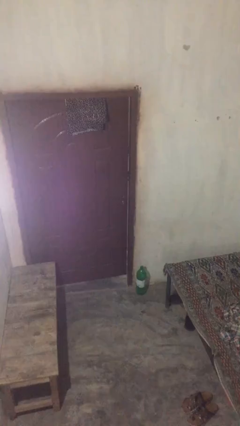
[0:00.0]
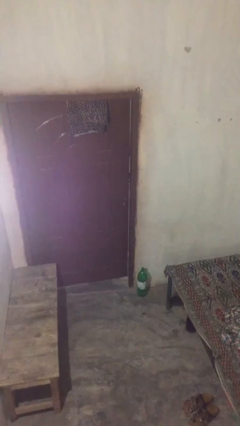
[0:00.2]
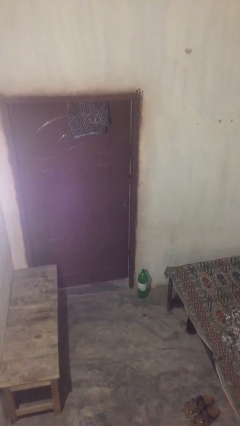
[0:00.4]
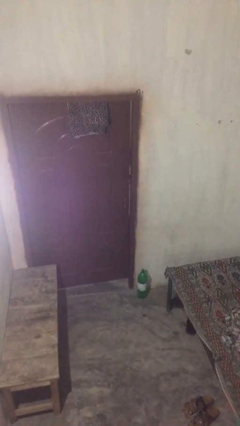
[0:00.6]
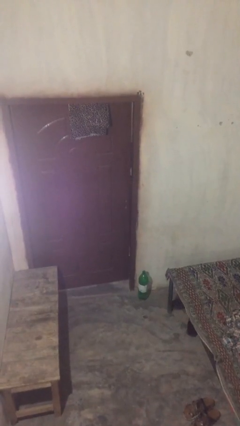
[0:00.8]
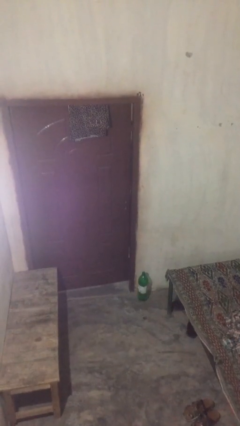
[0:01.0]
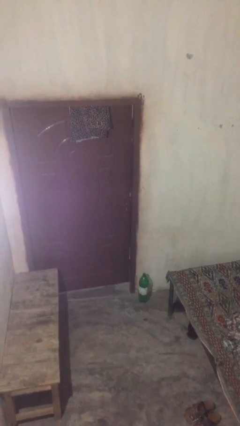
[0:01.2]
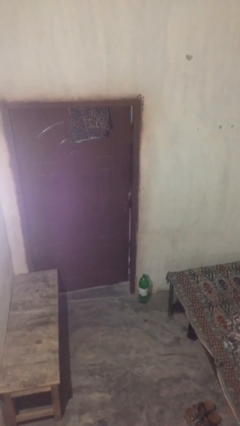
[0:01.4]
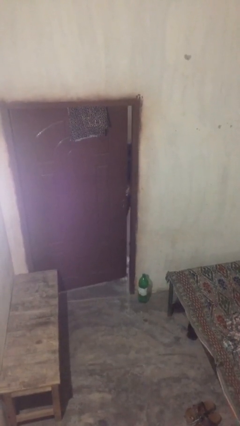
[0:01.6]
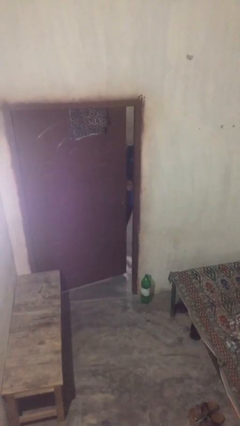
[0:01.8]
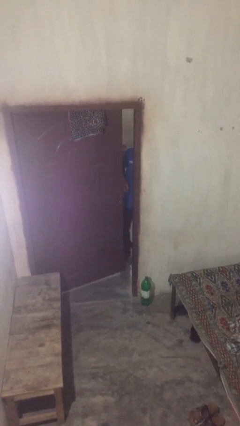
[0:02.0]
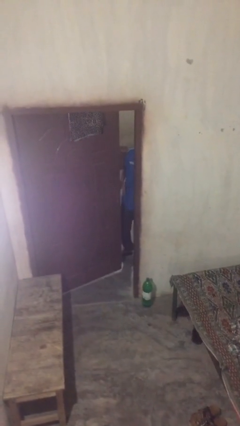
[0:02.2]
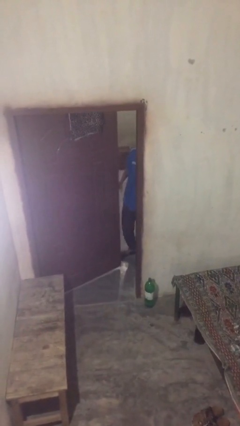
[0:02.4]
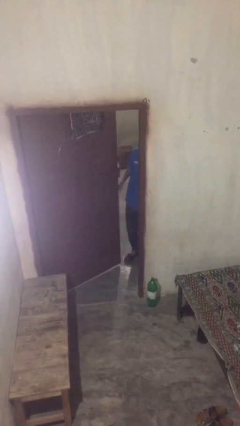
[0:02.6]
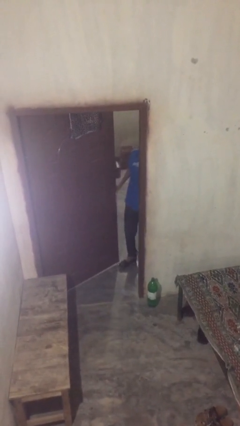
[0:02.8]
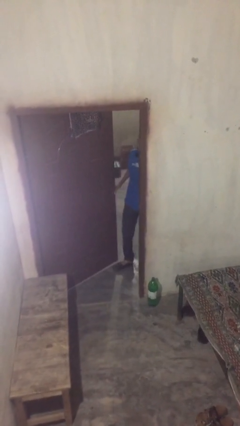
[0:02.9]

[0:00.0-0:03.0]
person opens facility door

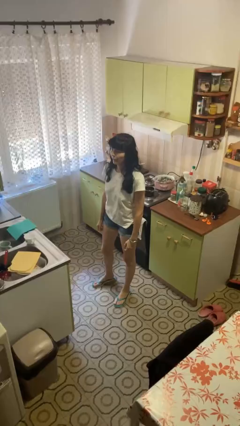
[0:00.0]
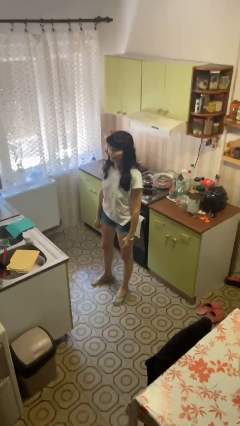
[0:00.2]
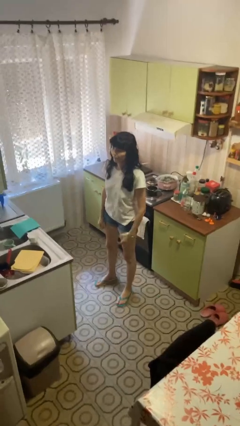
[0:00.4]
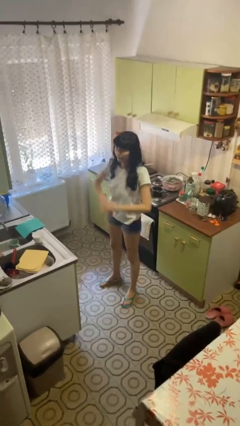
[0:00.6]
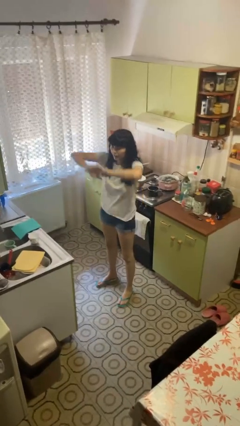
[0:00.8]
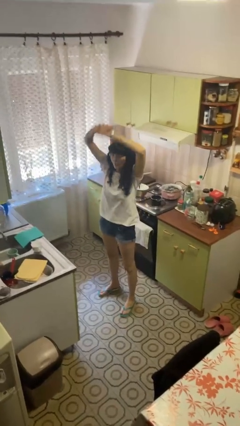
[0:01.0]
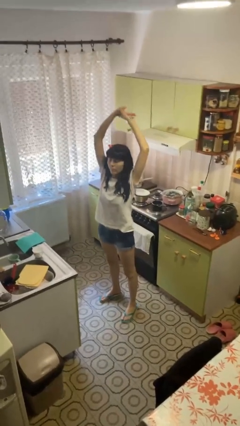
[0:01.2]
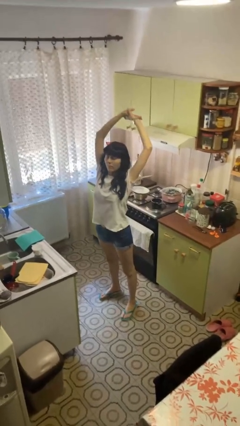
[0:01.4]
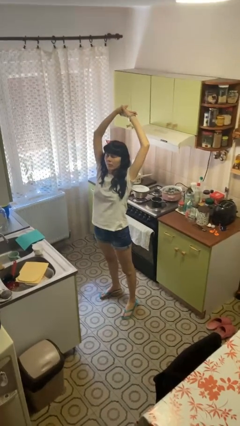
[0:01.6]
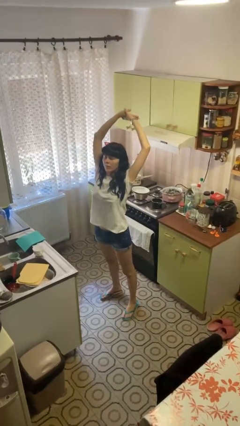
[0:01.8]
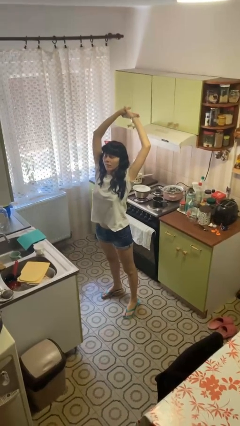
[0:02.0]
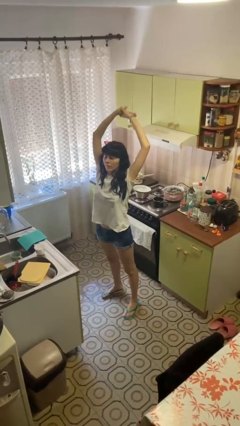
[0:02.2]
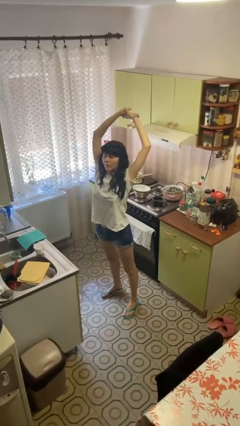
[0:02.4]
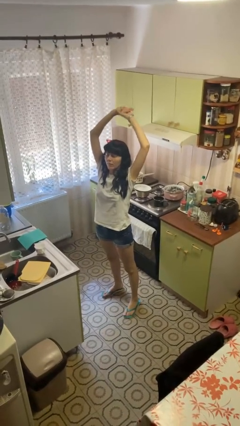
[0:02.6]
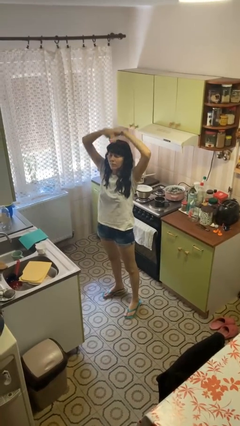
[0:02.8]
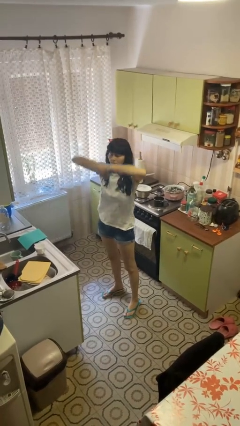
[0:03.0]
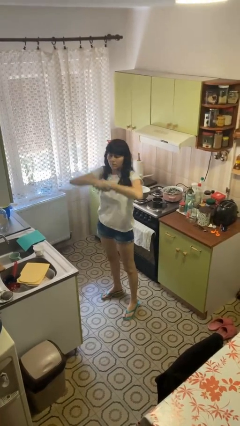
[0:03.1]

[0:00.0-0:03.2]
person stretches arms over head

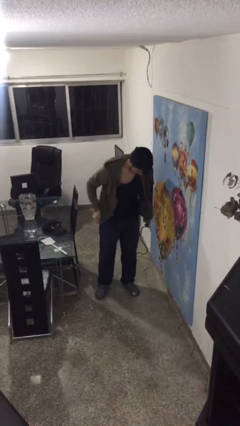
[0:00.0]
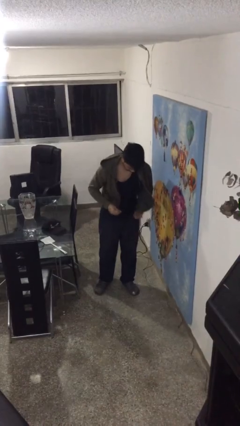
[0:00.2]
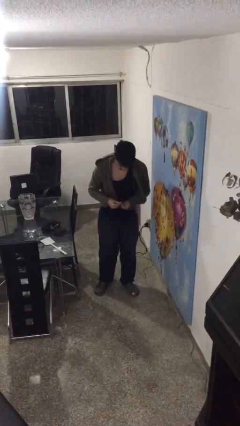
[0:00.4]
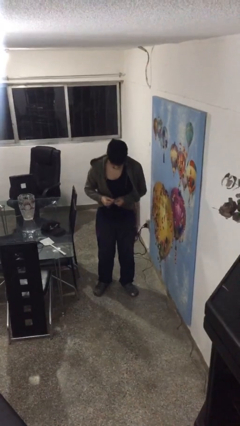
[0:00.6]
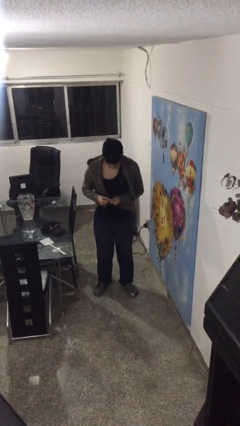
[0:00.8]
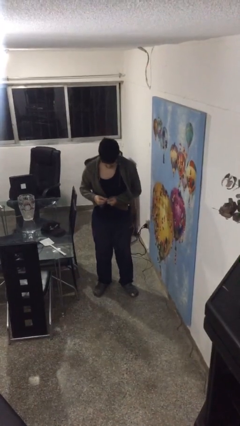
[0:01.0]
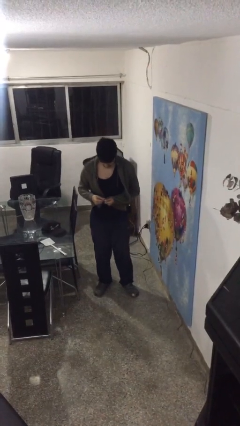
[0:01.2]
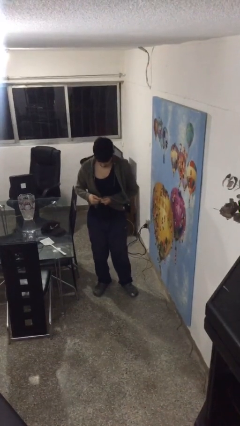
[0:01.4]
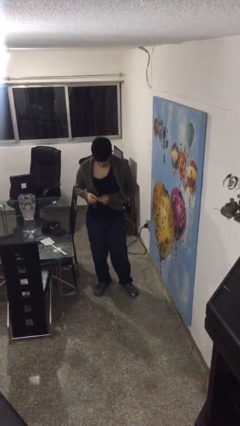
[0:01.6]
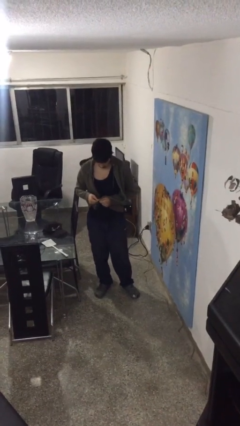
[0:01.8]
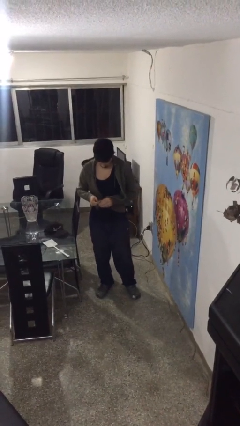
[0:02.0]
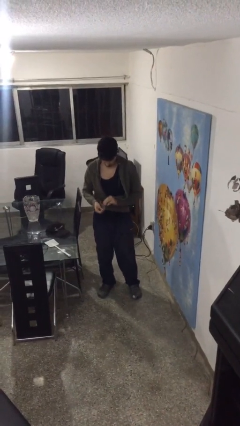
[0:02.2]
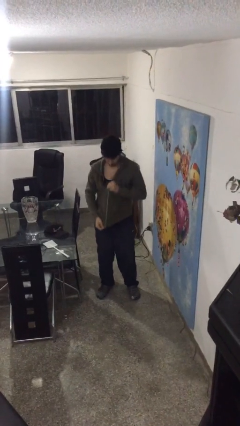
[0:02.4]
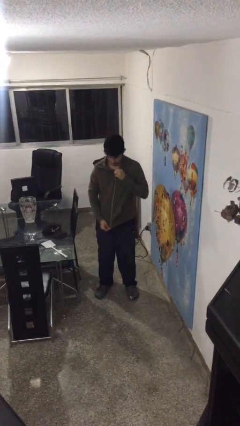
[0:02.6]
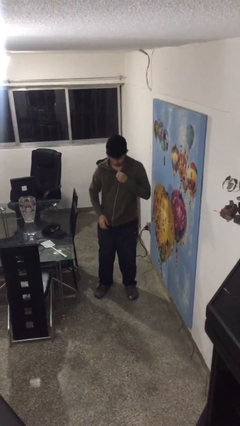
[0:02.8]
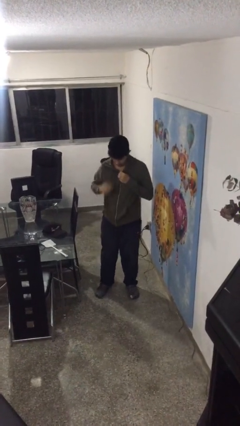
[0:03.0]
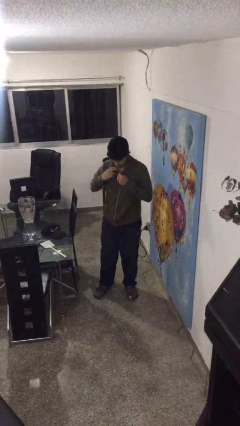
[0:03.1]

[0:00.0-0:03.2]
person zips up jacket

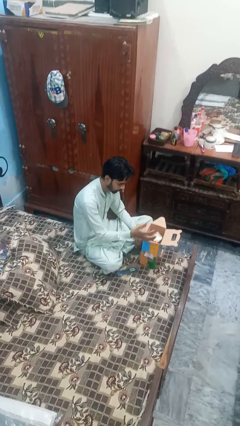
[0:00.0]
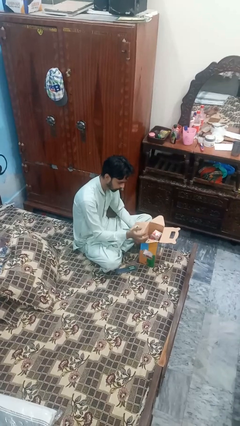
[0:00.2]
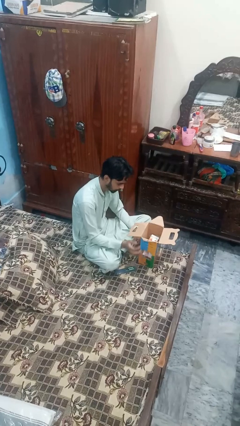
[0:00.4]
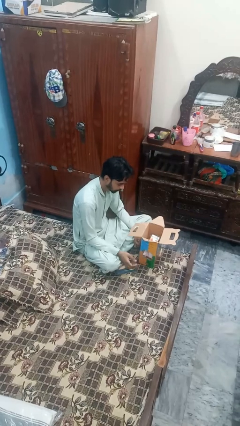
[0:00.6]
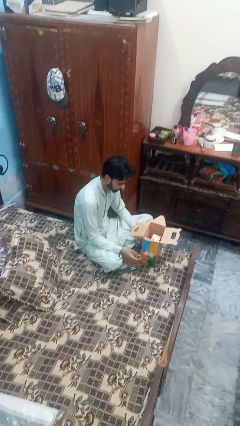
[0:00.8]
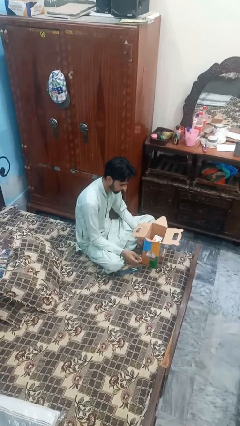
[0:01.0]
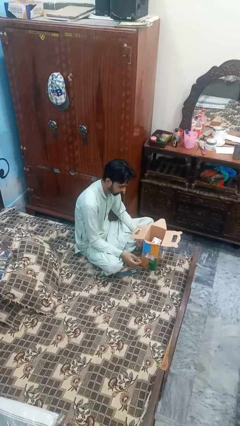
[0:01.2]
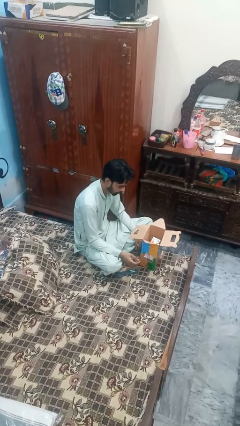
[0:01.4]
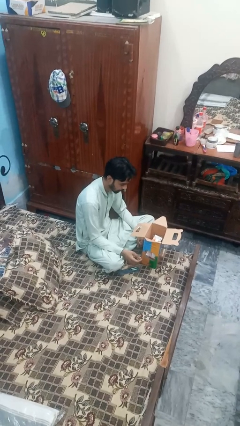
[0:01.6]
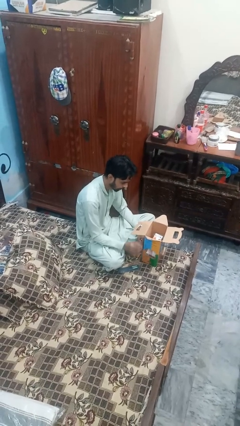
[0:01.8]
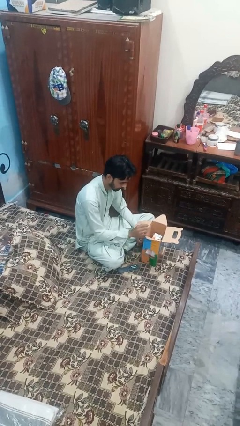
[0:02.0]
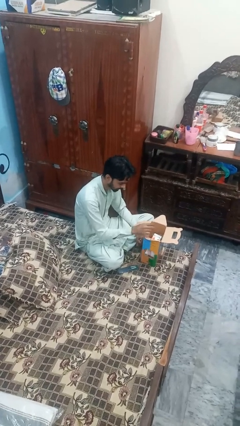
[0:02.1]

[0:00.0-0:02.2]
person puts object into box

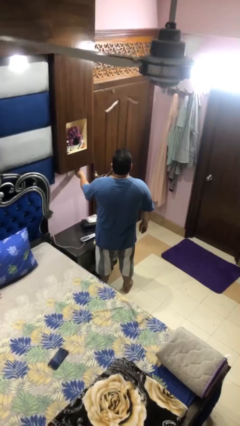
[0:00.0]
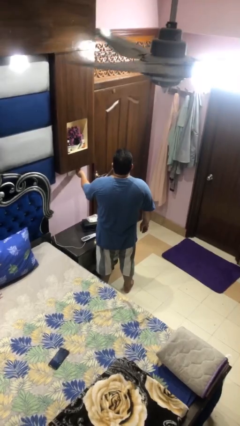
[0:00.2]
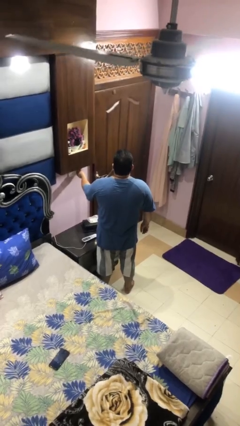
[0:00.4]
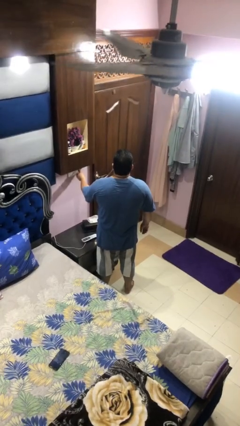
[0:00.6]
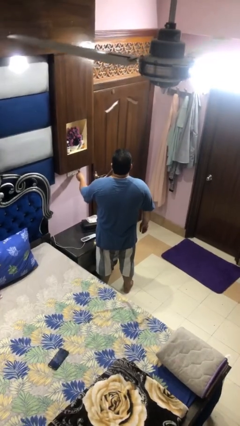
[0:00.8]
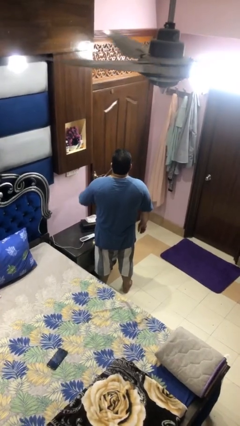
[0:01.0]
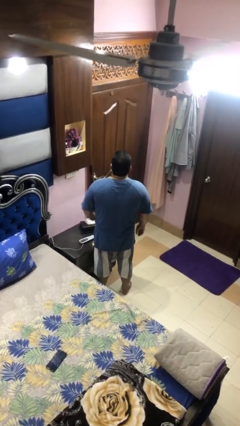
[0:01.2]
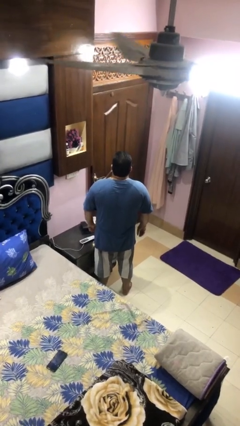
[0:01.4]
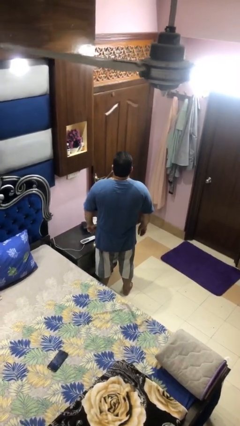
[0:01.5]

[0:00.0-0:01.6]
person turns off fan

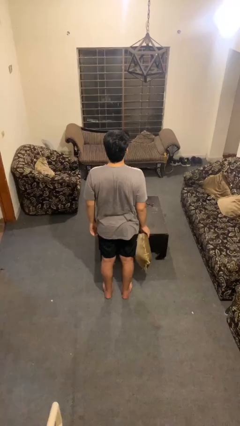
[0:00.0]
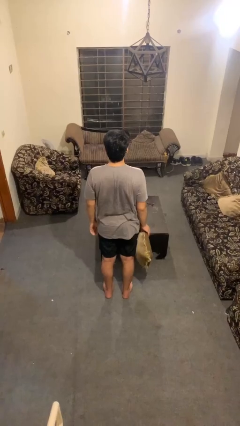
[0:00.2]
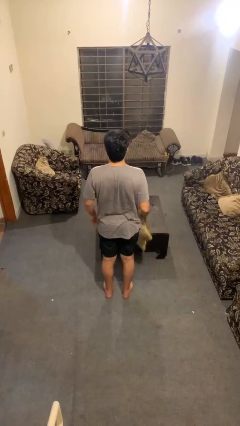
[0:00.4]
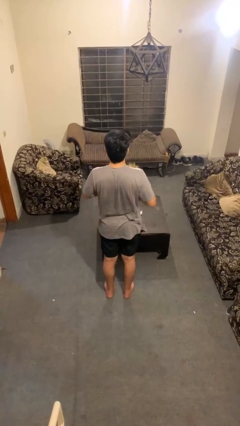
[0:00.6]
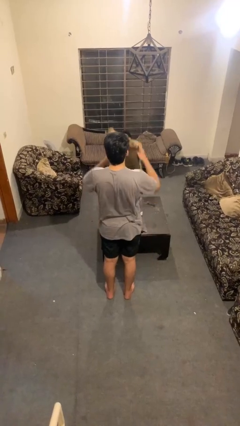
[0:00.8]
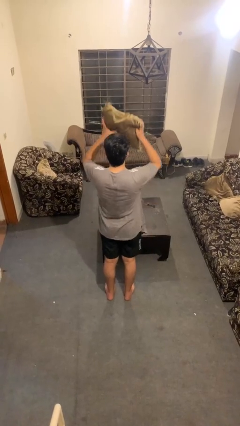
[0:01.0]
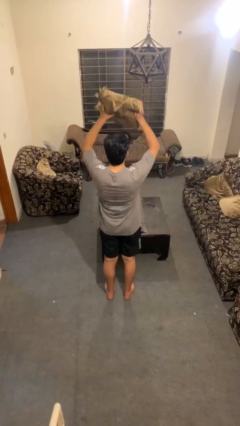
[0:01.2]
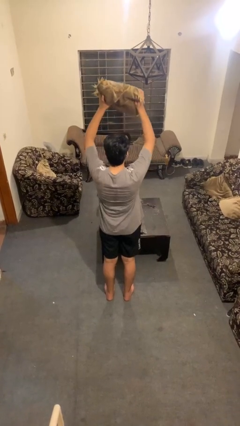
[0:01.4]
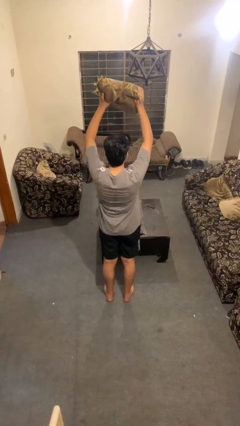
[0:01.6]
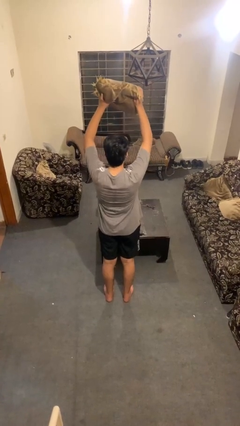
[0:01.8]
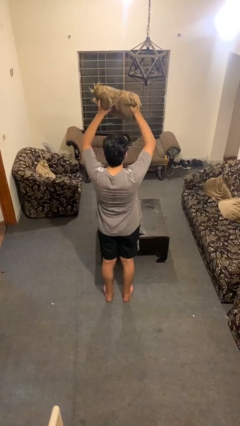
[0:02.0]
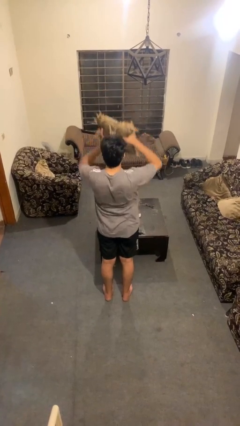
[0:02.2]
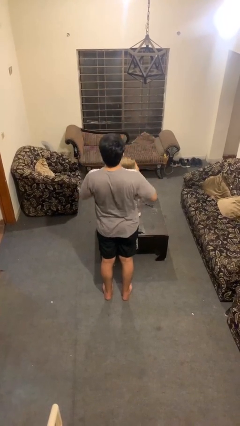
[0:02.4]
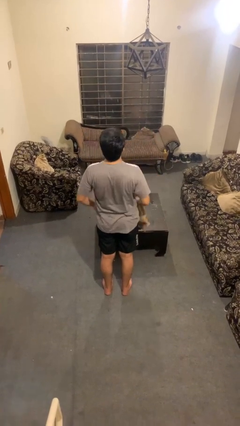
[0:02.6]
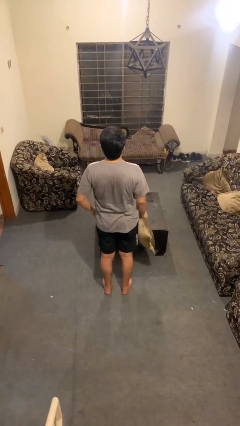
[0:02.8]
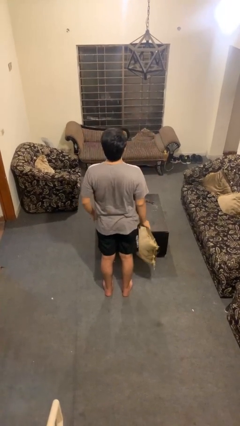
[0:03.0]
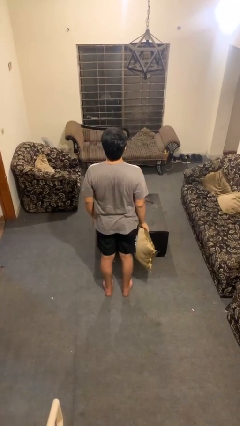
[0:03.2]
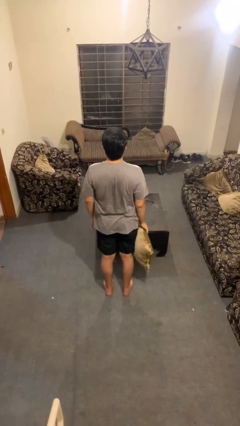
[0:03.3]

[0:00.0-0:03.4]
person holds object above head

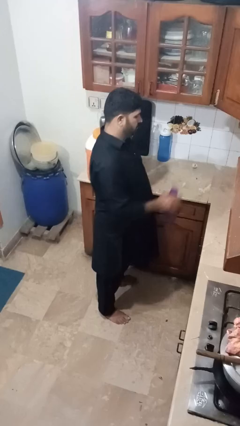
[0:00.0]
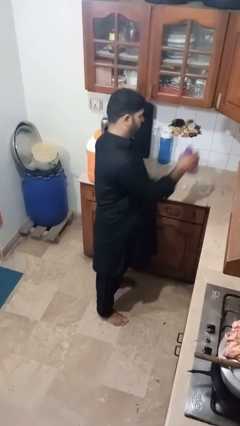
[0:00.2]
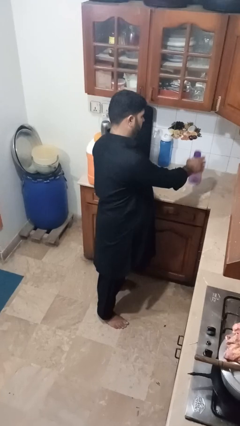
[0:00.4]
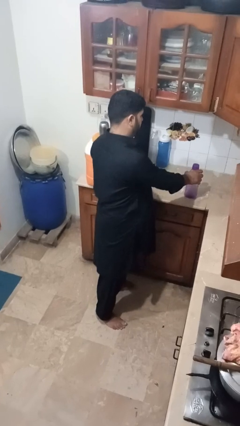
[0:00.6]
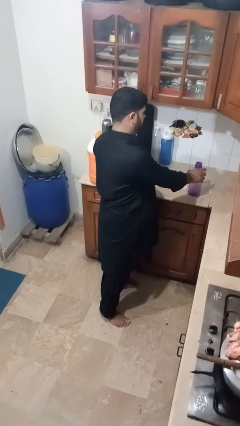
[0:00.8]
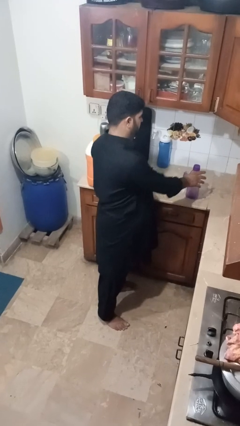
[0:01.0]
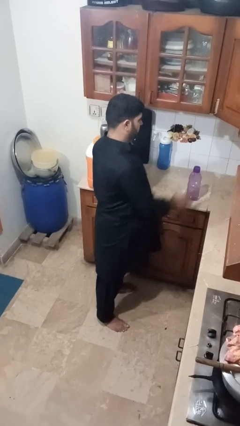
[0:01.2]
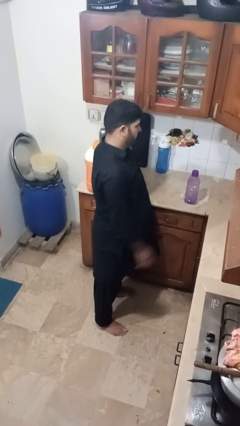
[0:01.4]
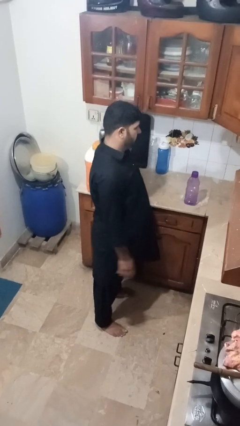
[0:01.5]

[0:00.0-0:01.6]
person puts down object on countertop
